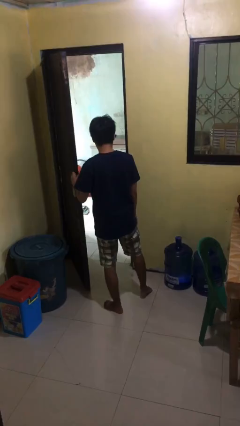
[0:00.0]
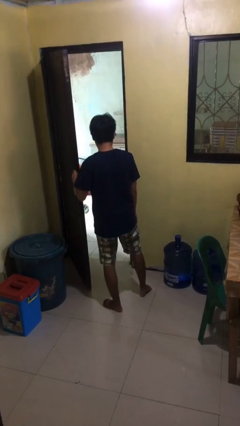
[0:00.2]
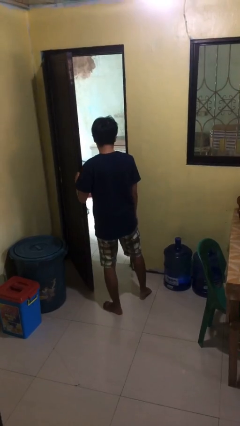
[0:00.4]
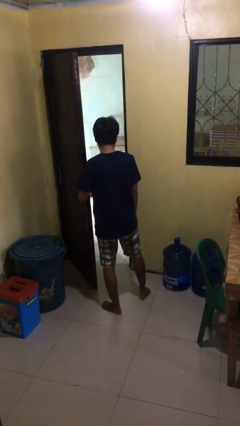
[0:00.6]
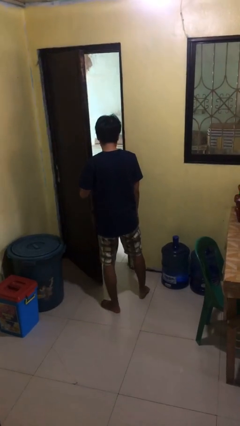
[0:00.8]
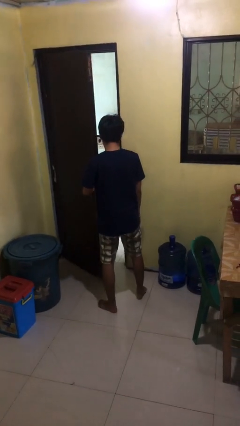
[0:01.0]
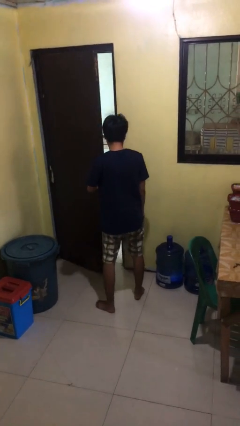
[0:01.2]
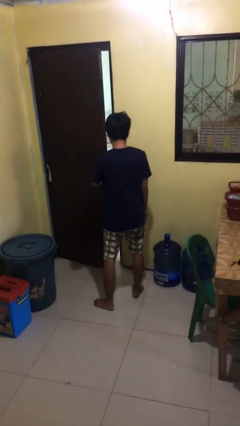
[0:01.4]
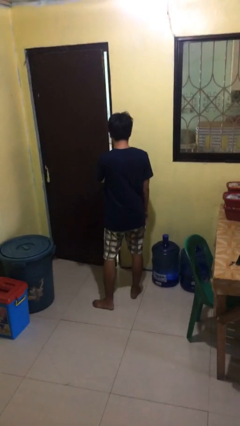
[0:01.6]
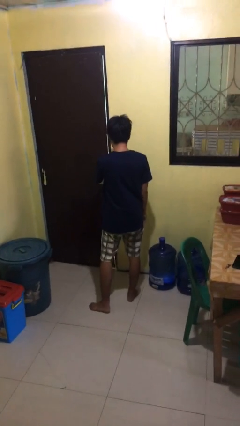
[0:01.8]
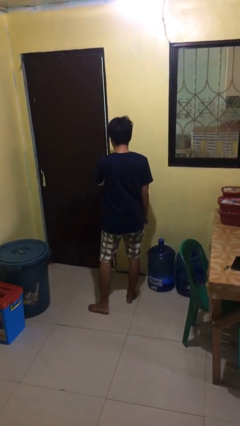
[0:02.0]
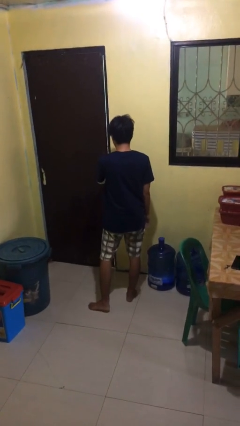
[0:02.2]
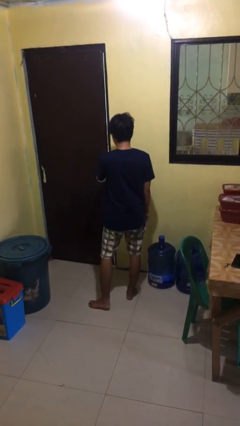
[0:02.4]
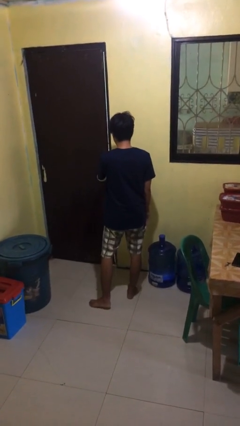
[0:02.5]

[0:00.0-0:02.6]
person closes facility door

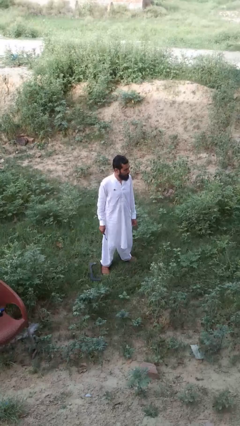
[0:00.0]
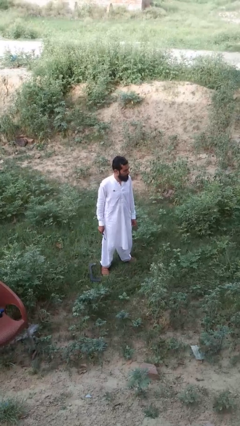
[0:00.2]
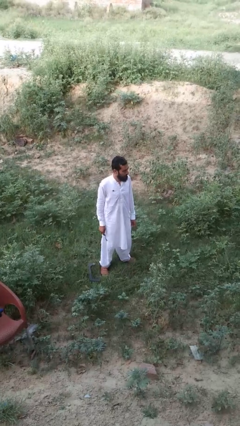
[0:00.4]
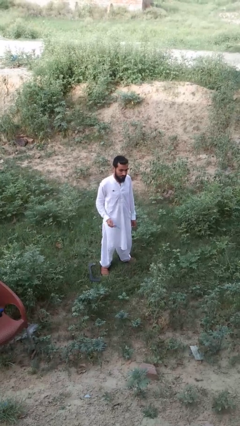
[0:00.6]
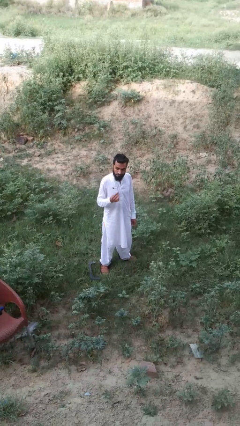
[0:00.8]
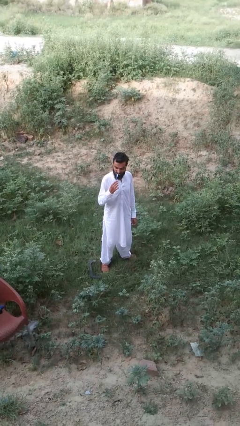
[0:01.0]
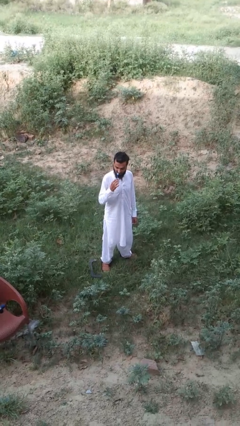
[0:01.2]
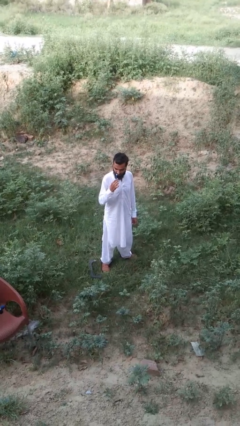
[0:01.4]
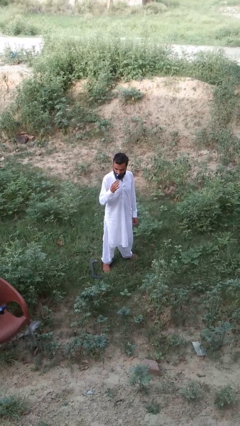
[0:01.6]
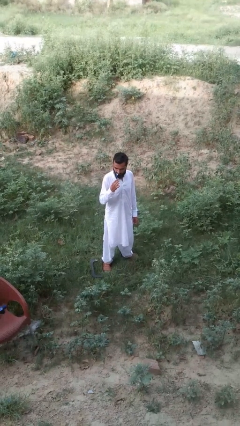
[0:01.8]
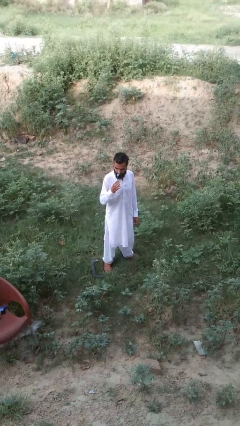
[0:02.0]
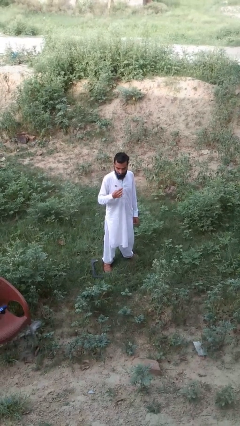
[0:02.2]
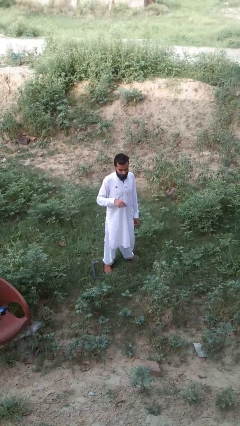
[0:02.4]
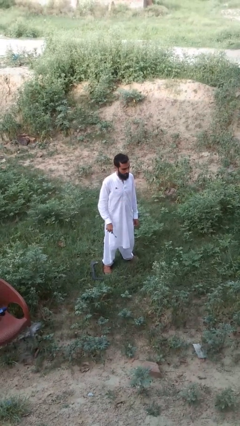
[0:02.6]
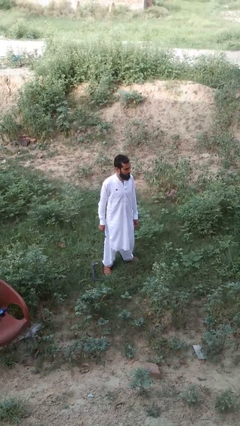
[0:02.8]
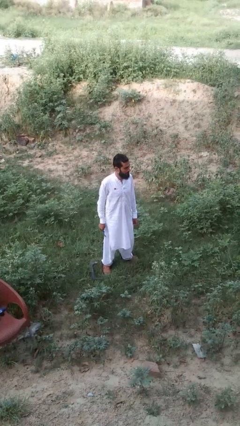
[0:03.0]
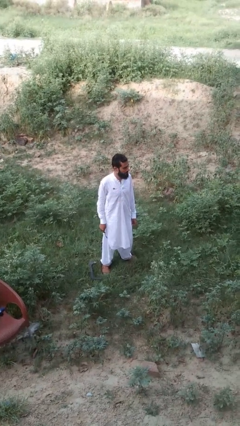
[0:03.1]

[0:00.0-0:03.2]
person brushes teeth

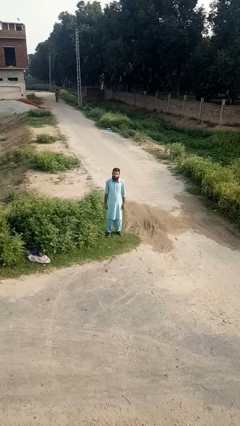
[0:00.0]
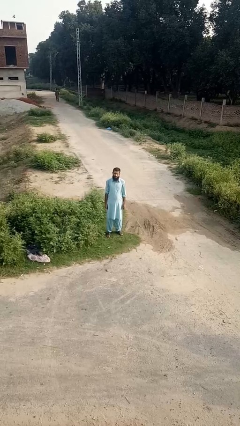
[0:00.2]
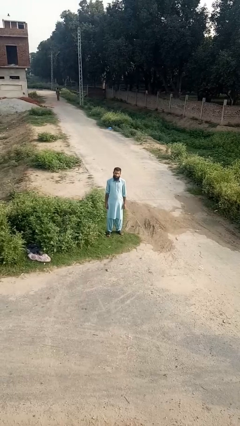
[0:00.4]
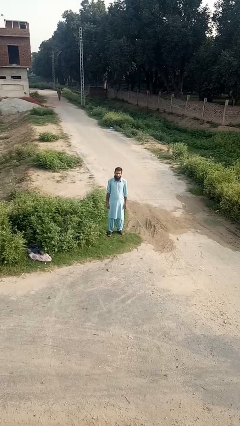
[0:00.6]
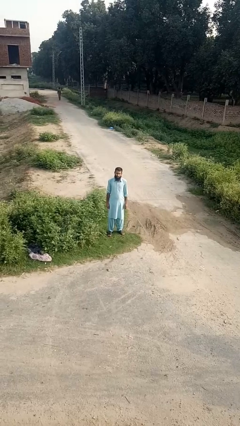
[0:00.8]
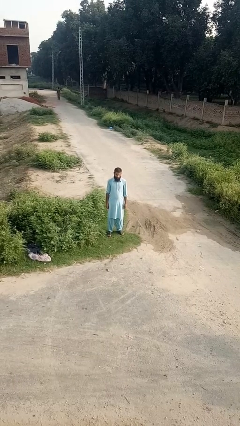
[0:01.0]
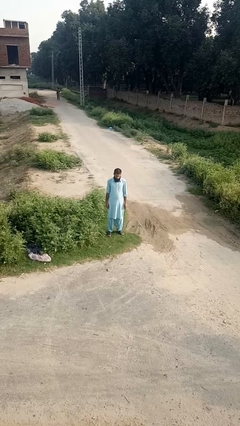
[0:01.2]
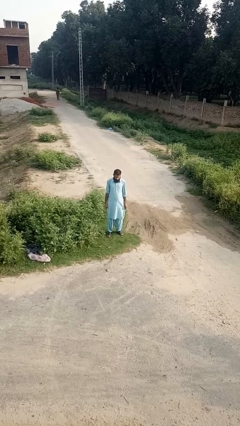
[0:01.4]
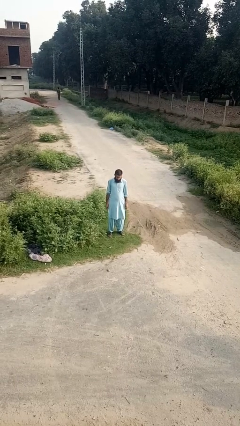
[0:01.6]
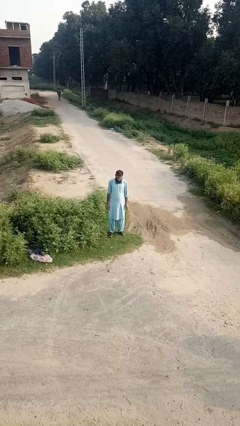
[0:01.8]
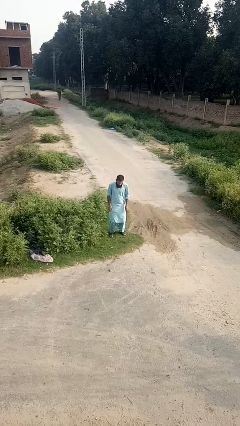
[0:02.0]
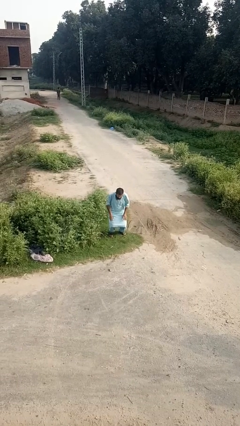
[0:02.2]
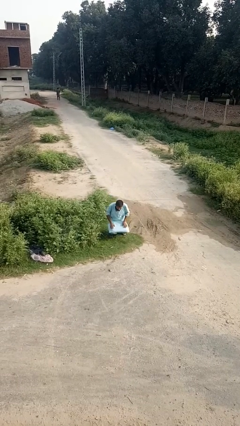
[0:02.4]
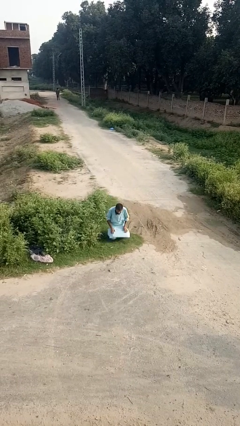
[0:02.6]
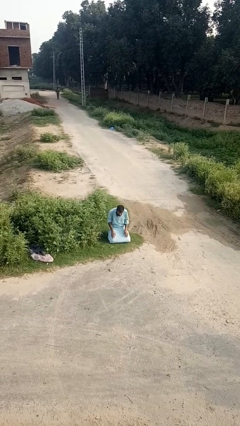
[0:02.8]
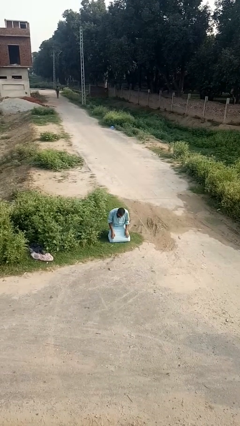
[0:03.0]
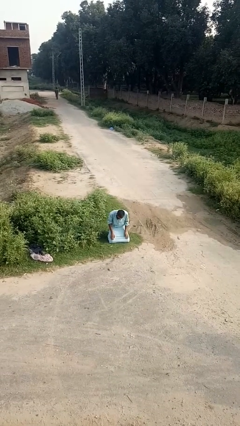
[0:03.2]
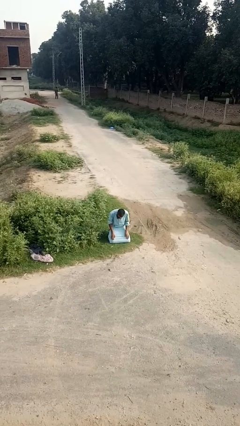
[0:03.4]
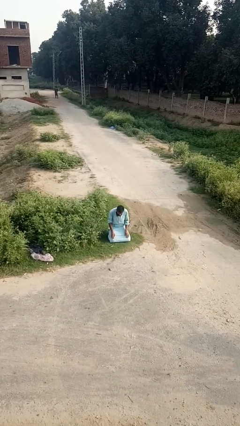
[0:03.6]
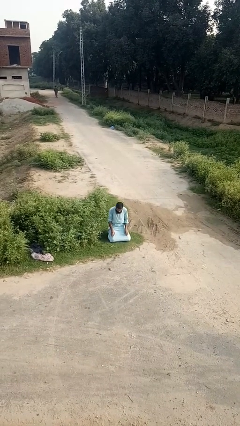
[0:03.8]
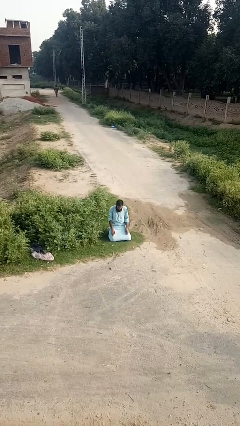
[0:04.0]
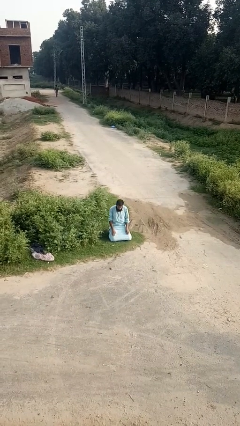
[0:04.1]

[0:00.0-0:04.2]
person kneels

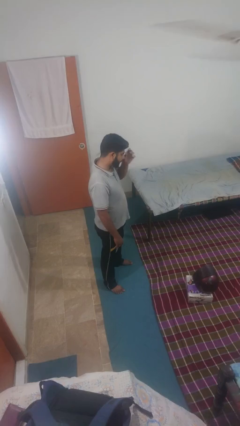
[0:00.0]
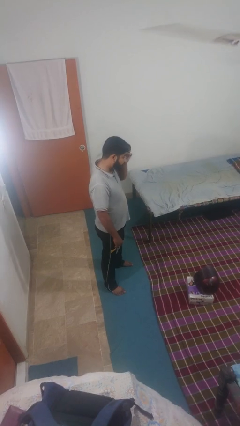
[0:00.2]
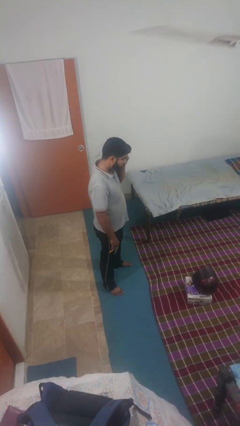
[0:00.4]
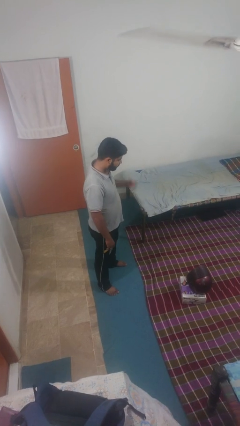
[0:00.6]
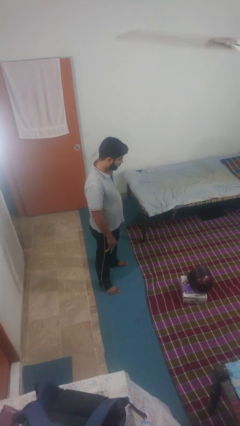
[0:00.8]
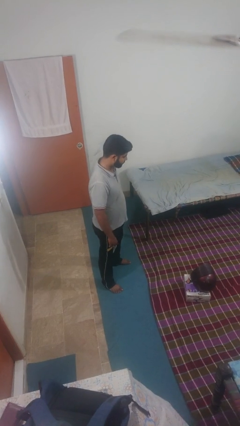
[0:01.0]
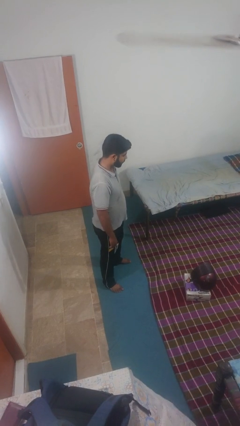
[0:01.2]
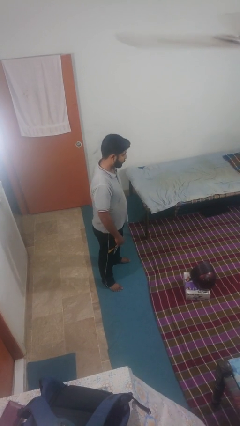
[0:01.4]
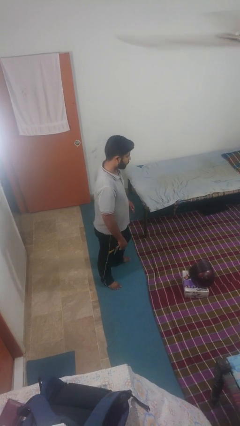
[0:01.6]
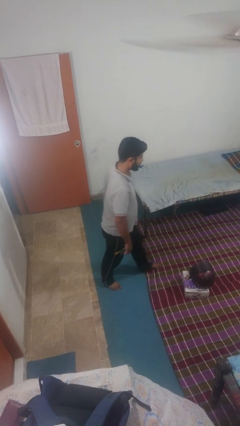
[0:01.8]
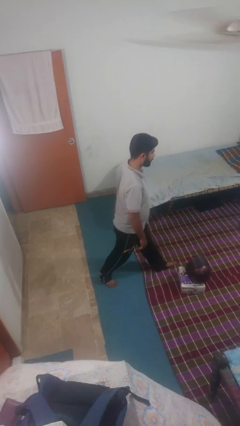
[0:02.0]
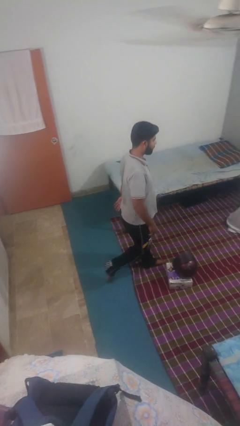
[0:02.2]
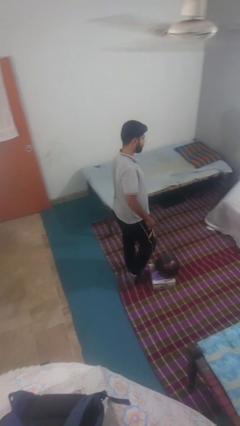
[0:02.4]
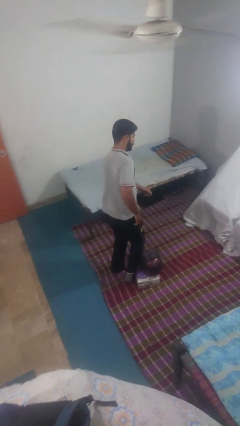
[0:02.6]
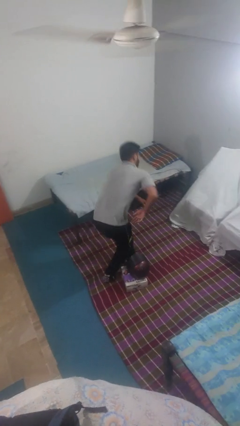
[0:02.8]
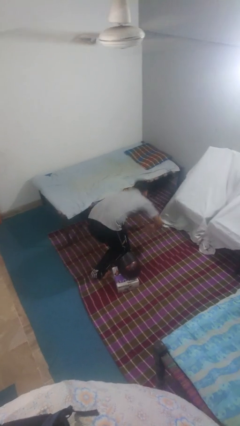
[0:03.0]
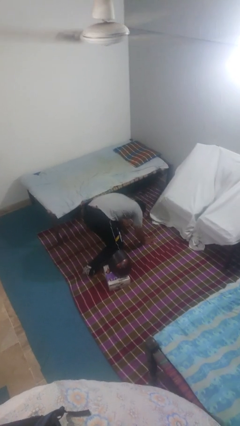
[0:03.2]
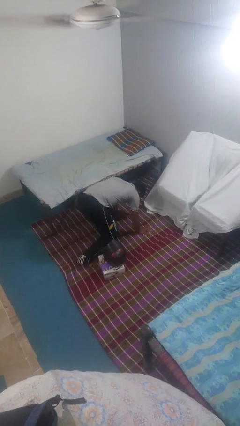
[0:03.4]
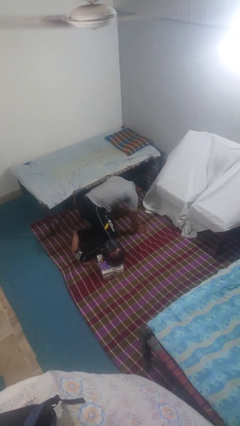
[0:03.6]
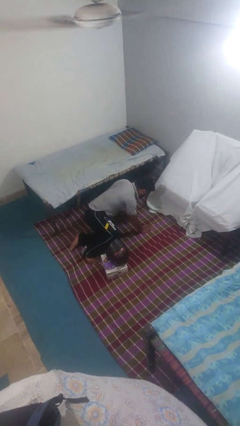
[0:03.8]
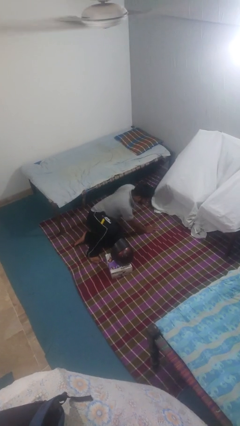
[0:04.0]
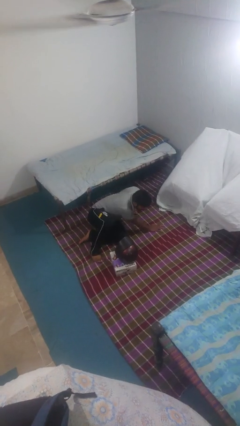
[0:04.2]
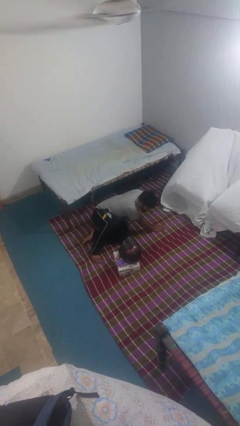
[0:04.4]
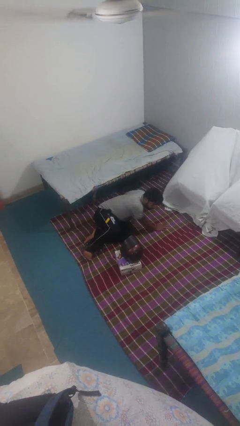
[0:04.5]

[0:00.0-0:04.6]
person trips on object on floor

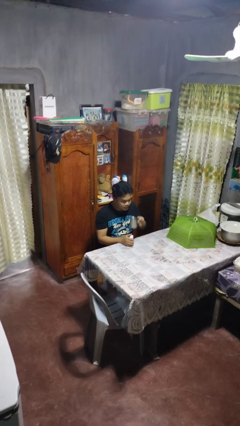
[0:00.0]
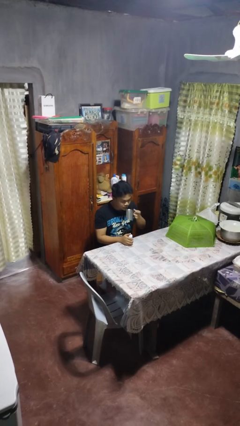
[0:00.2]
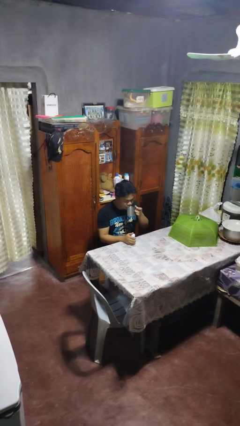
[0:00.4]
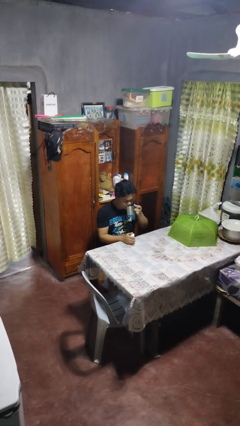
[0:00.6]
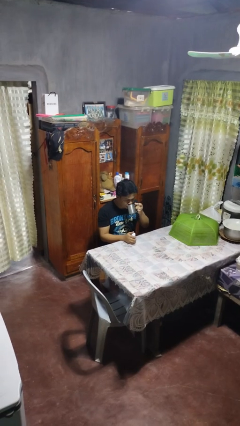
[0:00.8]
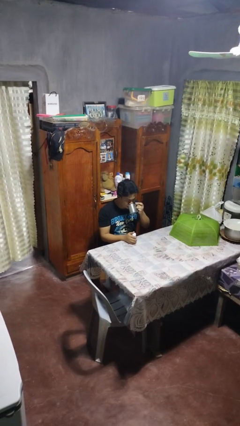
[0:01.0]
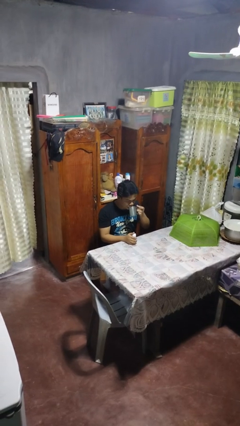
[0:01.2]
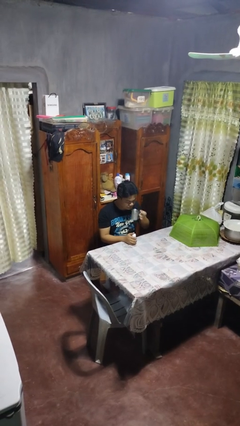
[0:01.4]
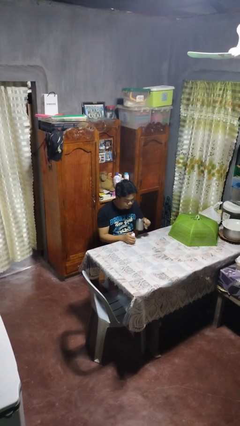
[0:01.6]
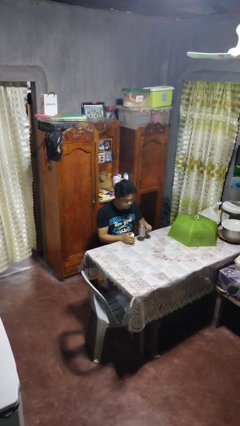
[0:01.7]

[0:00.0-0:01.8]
person drinks from cup

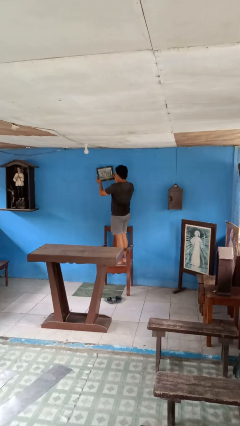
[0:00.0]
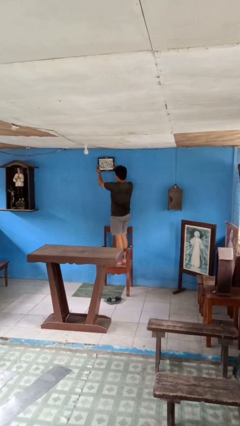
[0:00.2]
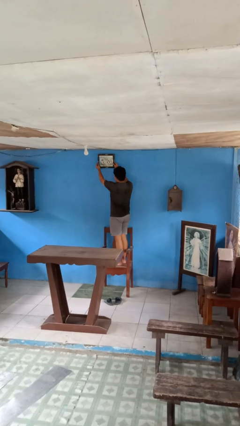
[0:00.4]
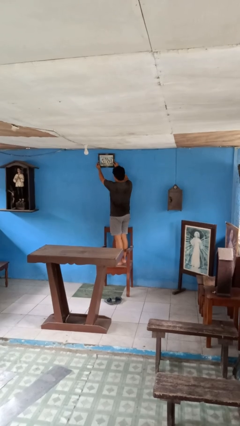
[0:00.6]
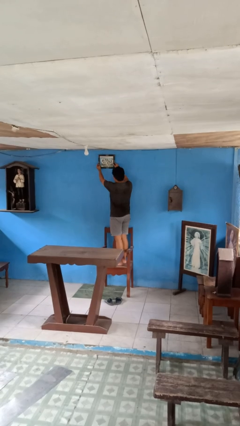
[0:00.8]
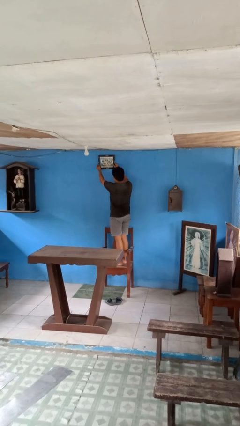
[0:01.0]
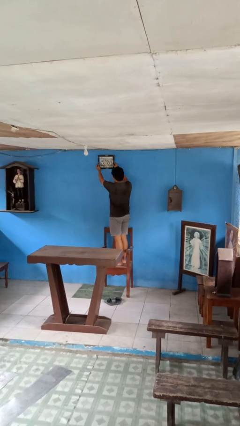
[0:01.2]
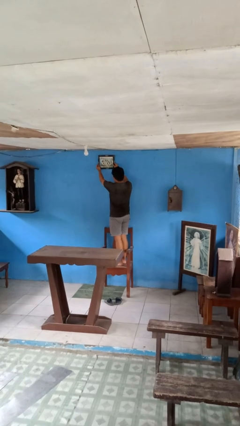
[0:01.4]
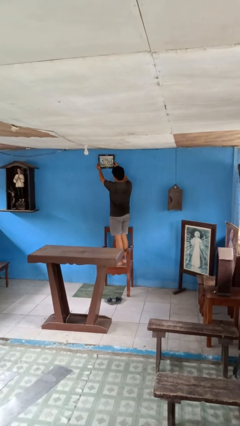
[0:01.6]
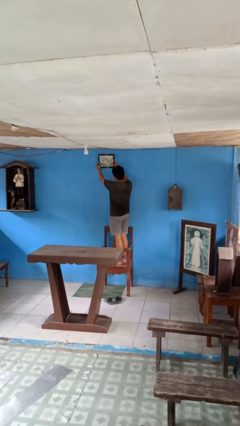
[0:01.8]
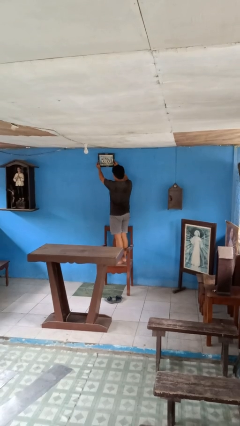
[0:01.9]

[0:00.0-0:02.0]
person puts up picture frame
